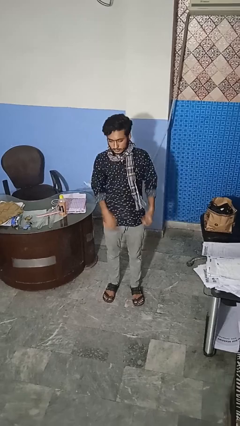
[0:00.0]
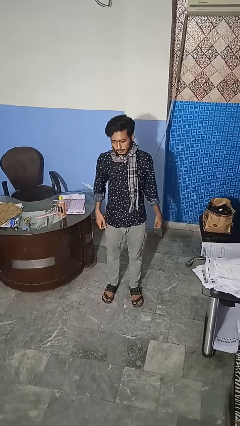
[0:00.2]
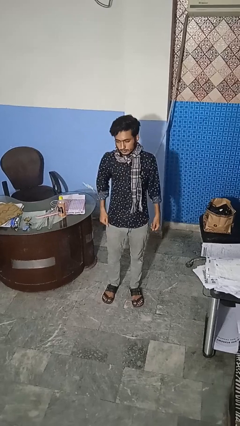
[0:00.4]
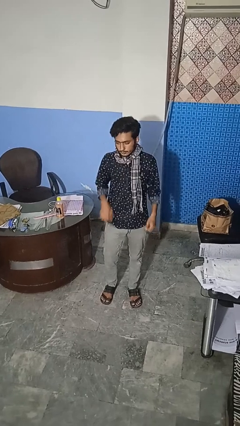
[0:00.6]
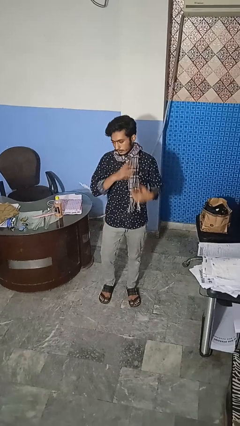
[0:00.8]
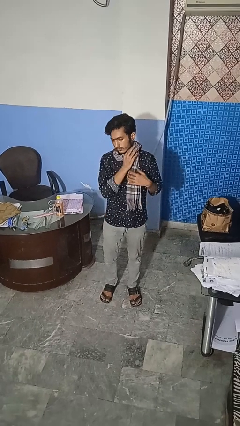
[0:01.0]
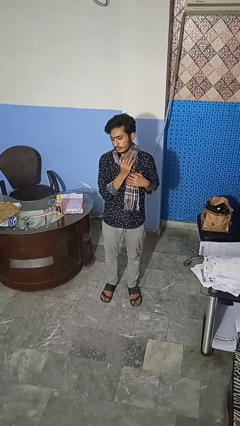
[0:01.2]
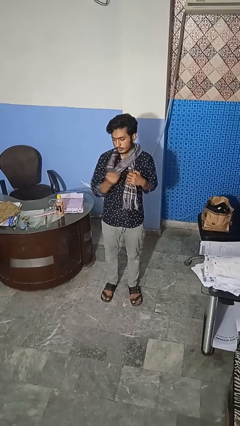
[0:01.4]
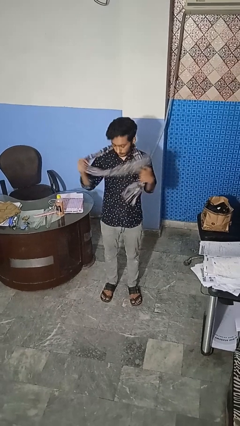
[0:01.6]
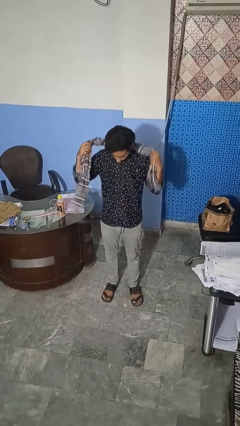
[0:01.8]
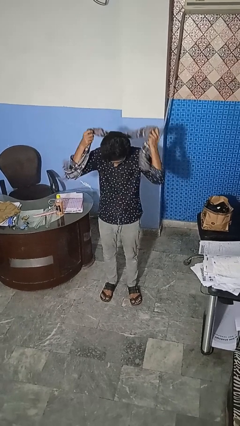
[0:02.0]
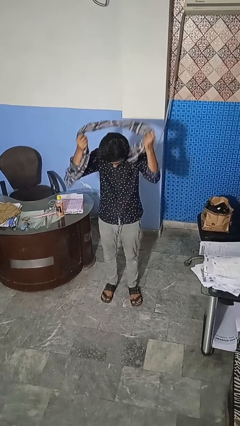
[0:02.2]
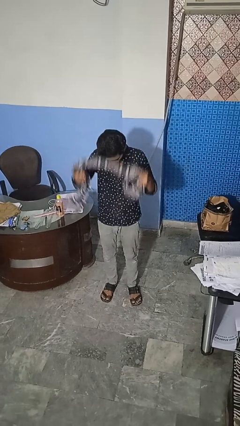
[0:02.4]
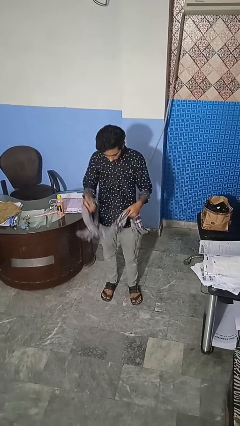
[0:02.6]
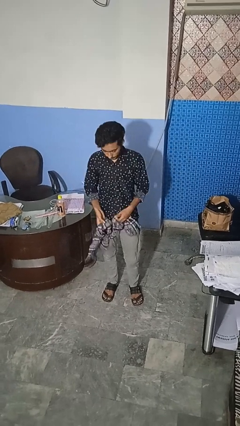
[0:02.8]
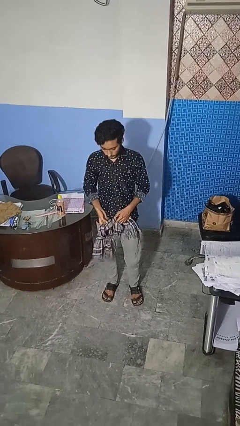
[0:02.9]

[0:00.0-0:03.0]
person takes off scarf

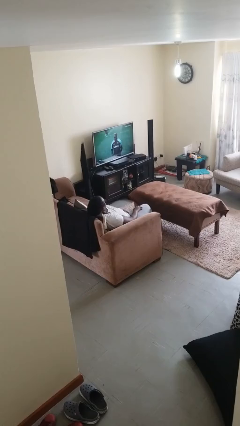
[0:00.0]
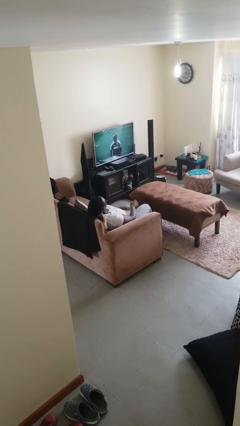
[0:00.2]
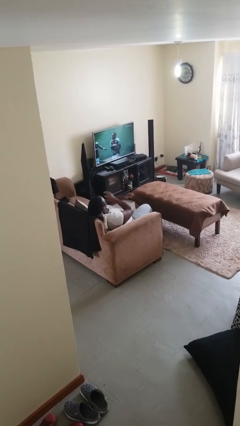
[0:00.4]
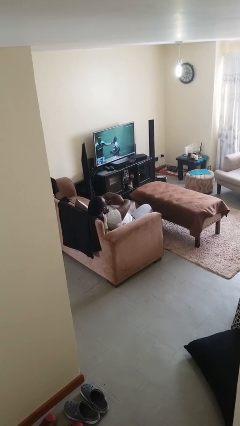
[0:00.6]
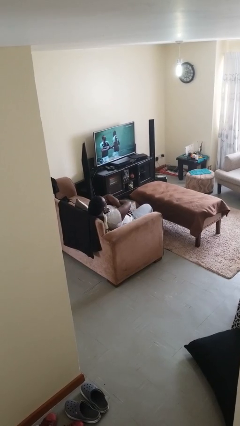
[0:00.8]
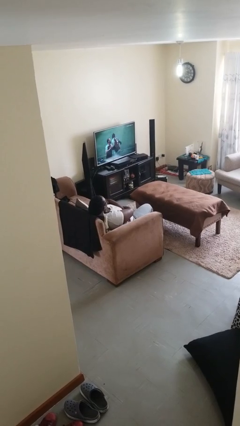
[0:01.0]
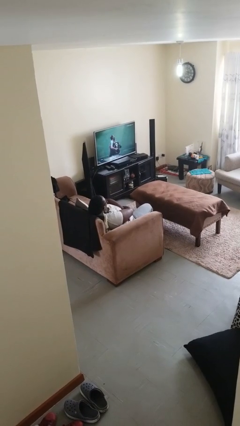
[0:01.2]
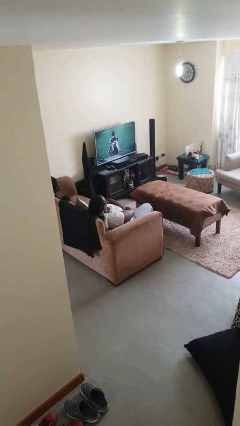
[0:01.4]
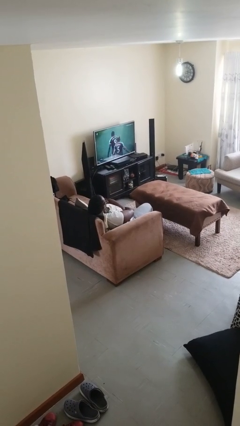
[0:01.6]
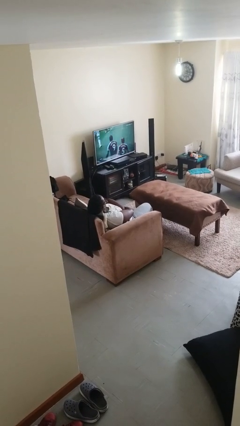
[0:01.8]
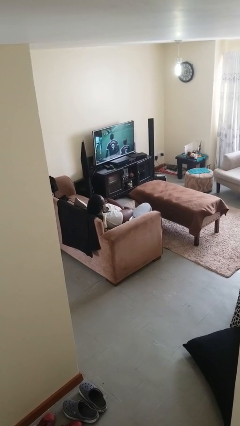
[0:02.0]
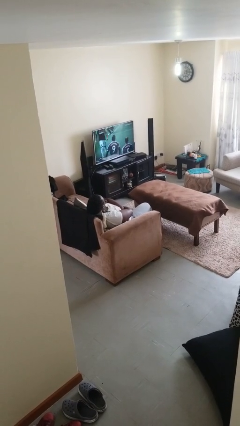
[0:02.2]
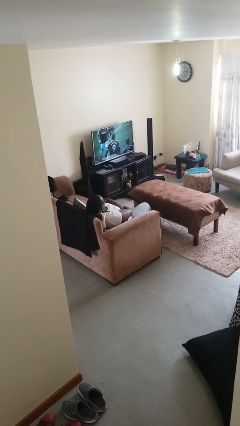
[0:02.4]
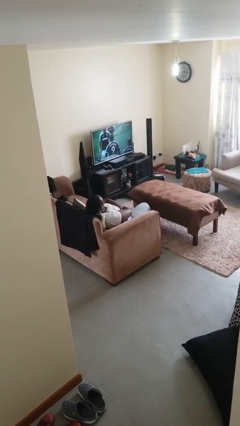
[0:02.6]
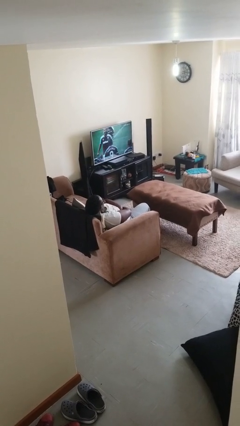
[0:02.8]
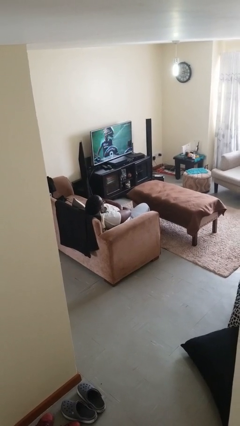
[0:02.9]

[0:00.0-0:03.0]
person crosses arms

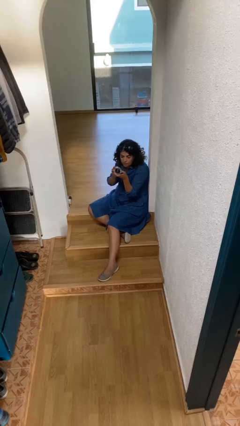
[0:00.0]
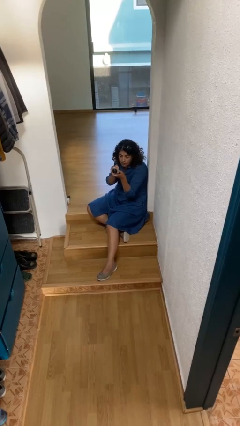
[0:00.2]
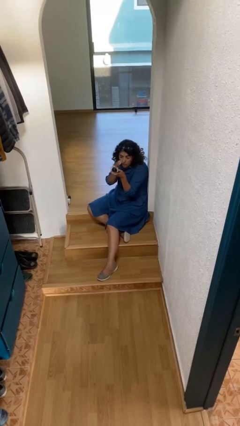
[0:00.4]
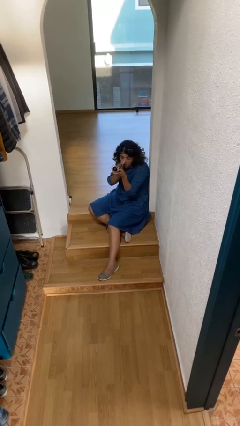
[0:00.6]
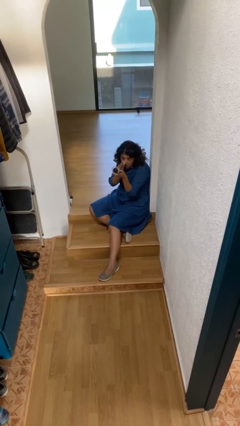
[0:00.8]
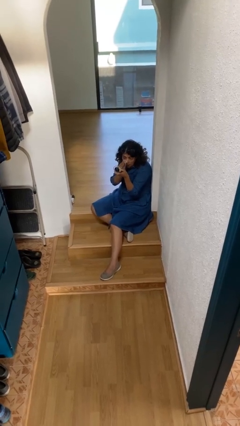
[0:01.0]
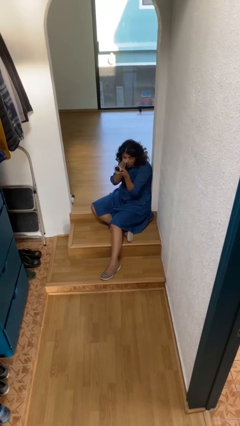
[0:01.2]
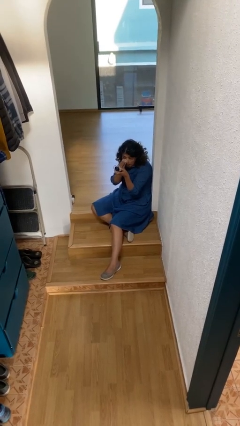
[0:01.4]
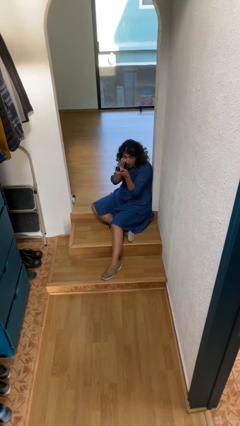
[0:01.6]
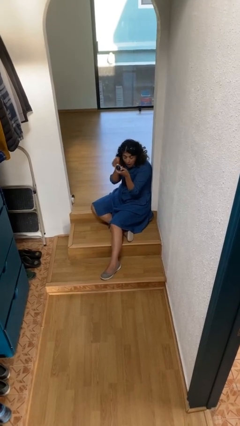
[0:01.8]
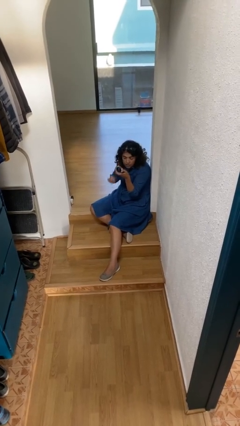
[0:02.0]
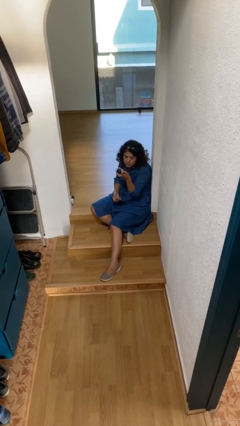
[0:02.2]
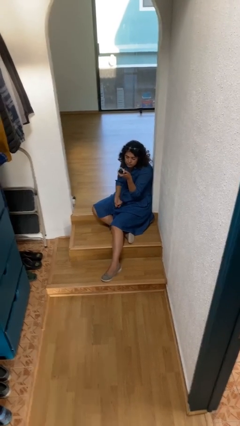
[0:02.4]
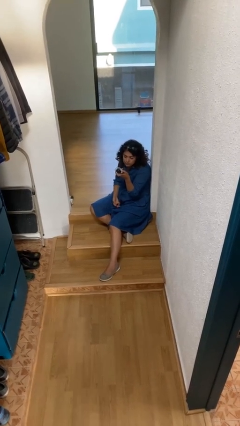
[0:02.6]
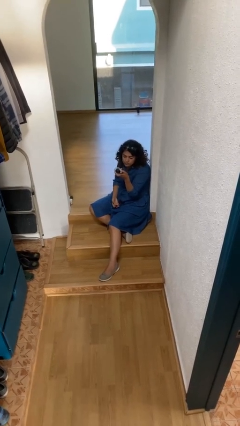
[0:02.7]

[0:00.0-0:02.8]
person applies foundation makeup

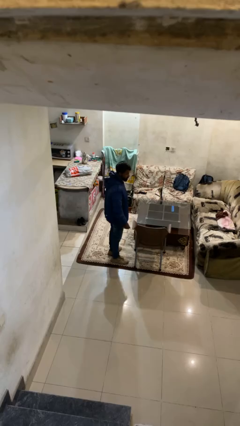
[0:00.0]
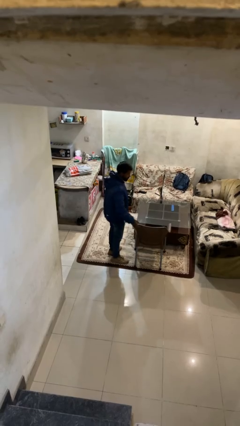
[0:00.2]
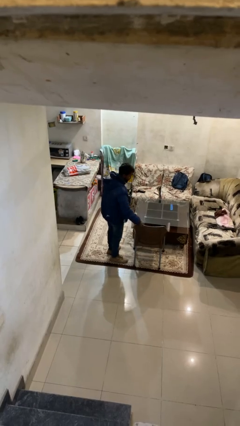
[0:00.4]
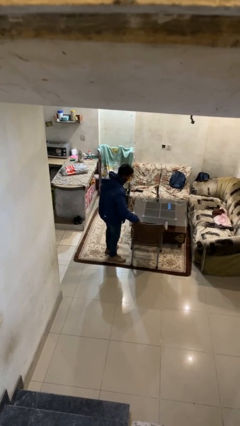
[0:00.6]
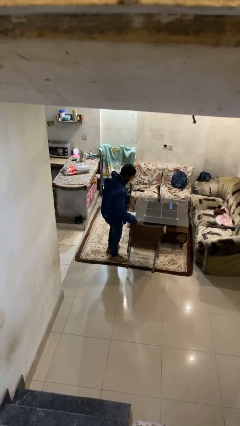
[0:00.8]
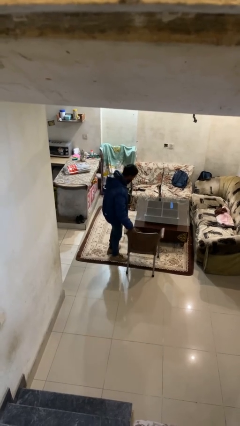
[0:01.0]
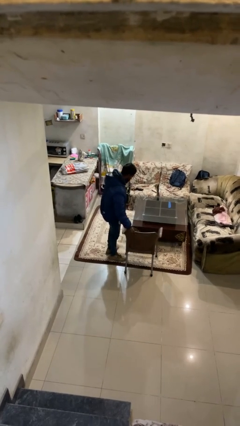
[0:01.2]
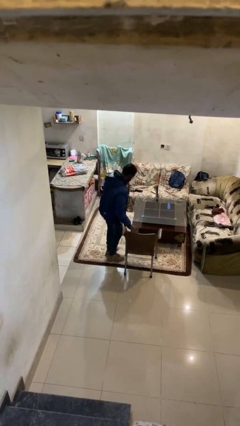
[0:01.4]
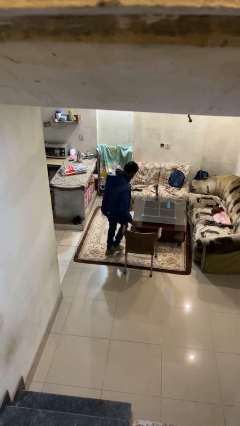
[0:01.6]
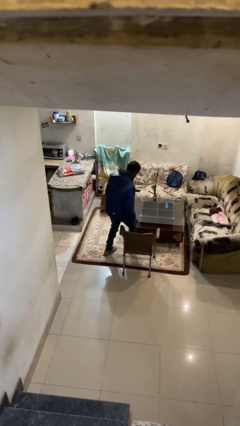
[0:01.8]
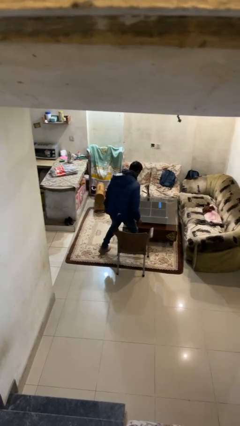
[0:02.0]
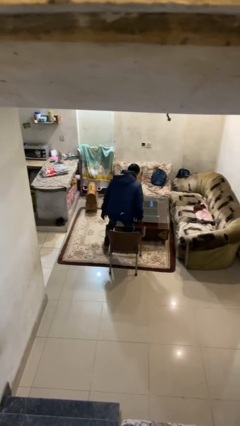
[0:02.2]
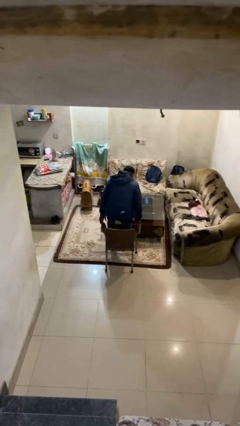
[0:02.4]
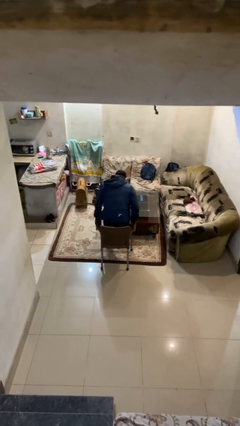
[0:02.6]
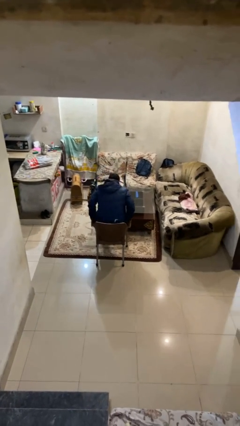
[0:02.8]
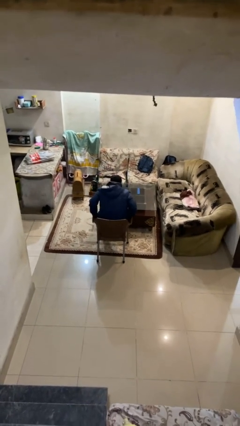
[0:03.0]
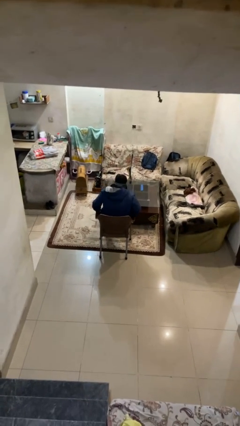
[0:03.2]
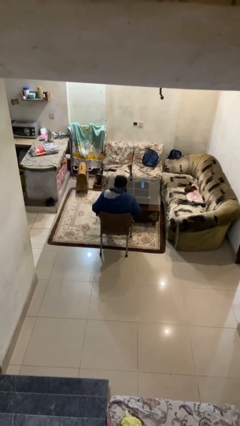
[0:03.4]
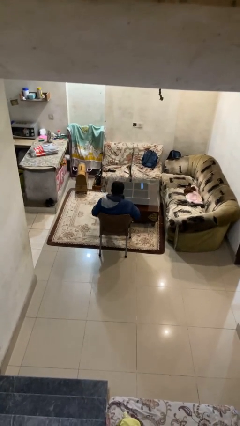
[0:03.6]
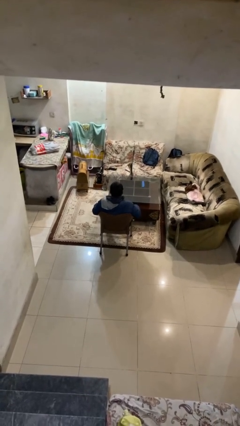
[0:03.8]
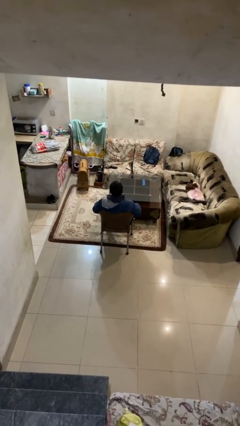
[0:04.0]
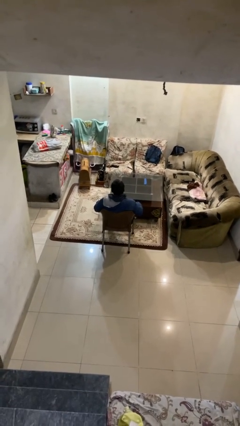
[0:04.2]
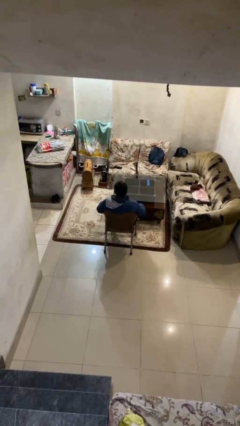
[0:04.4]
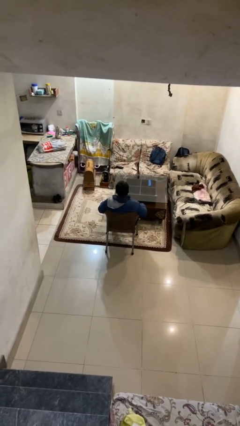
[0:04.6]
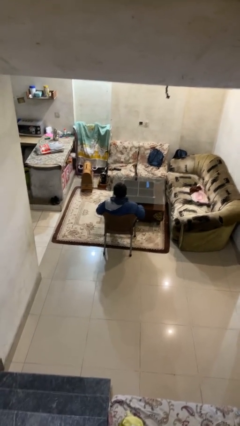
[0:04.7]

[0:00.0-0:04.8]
person sits down

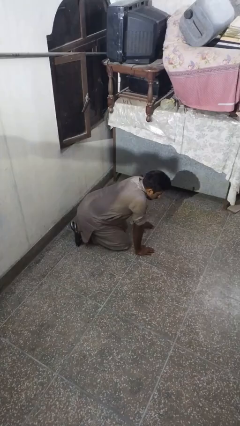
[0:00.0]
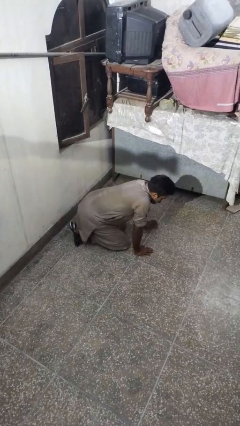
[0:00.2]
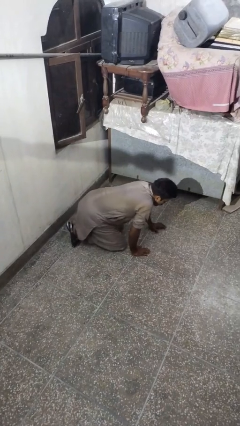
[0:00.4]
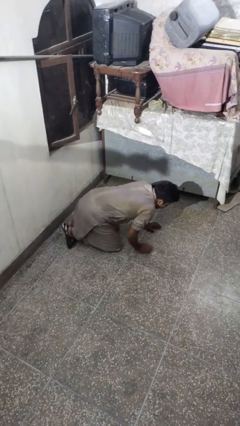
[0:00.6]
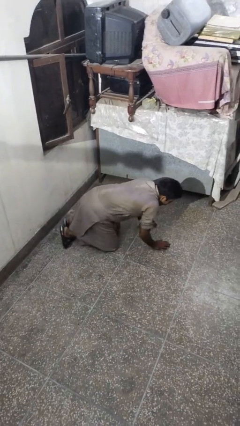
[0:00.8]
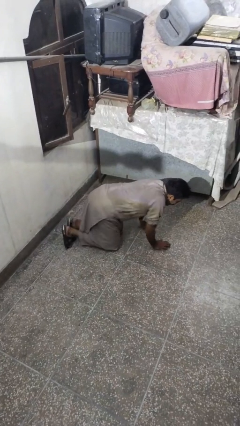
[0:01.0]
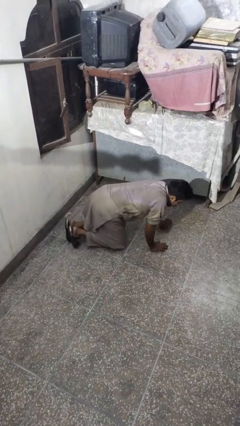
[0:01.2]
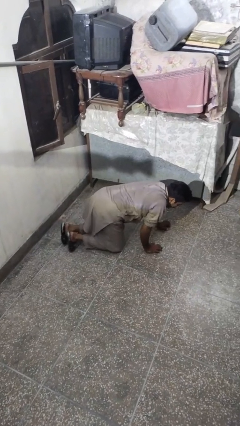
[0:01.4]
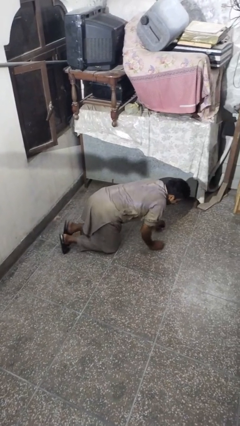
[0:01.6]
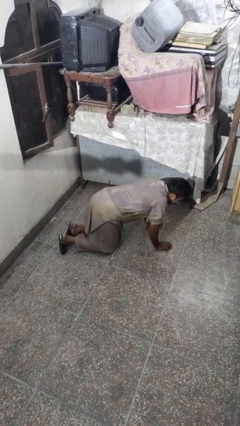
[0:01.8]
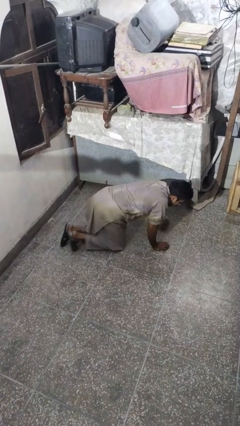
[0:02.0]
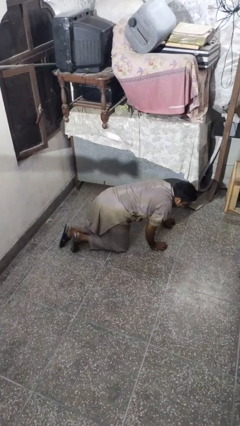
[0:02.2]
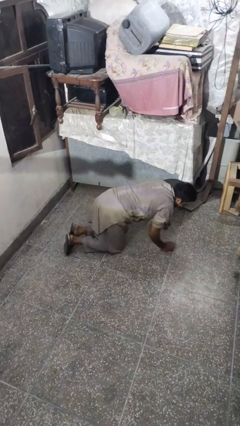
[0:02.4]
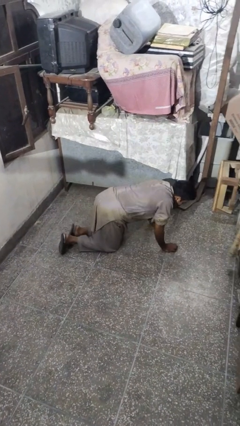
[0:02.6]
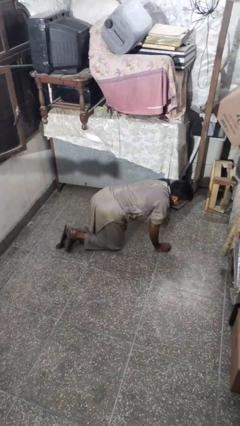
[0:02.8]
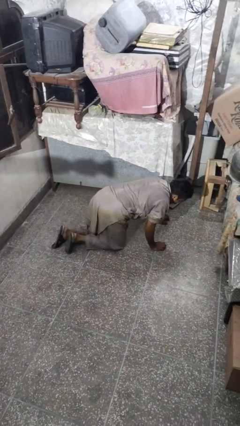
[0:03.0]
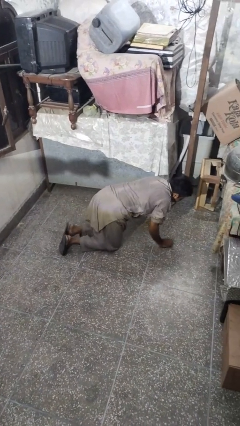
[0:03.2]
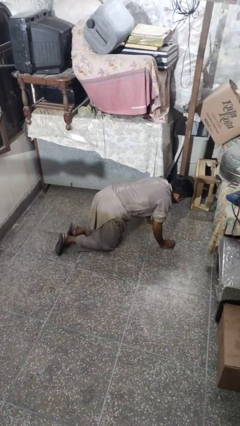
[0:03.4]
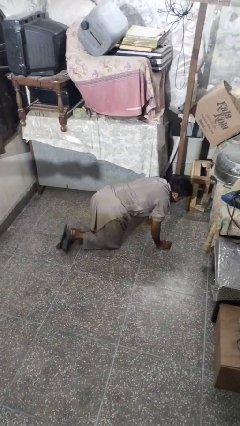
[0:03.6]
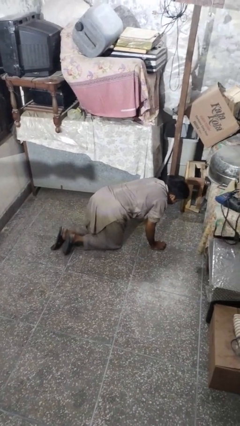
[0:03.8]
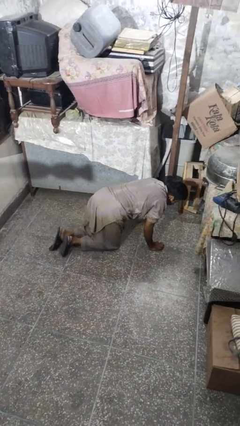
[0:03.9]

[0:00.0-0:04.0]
person crawls

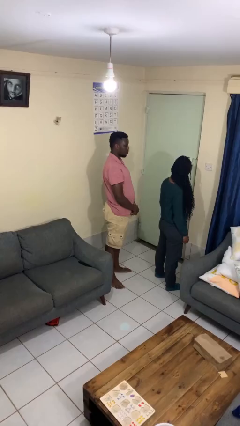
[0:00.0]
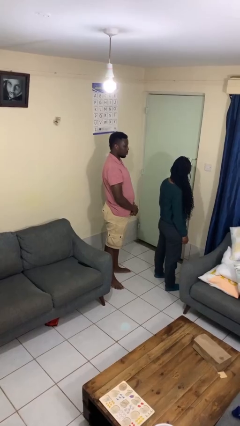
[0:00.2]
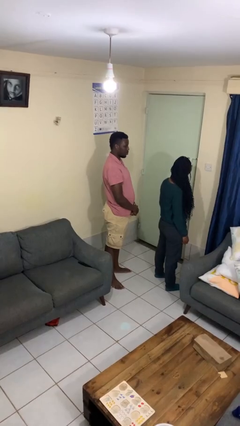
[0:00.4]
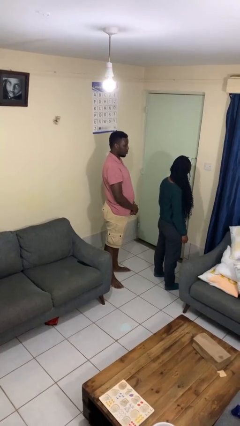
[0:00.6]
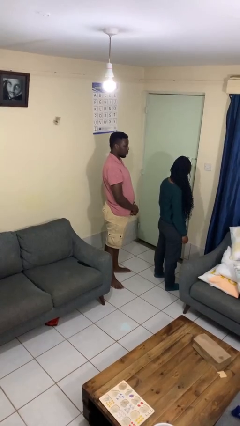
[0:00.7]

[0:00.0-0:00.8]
person touches back of person
